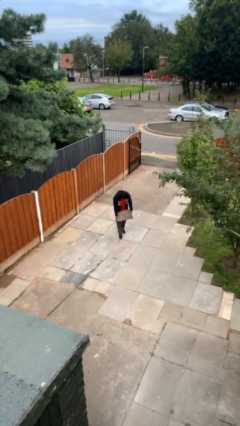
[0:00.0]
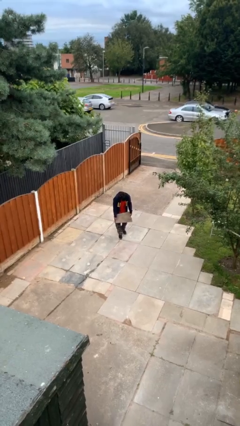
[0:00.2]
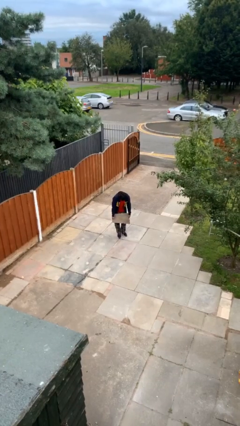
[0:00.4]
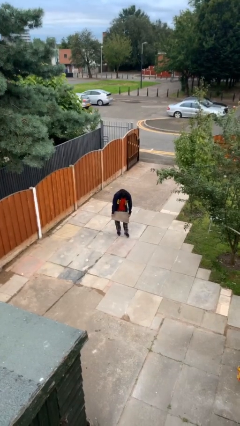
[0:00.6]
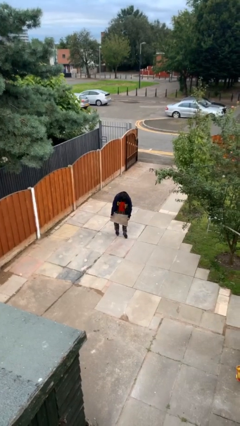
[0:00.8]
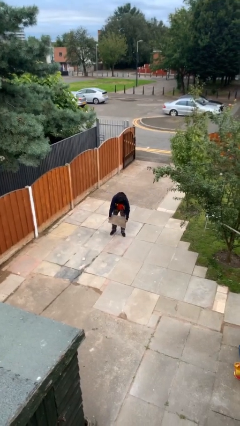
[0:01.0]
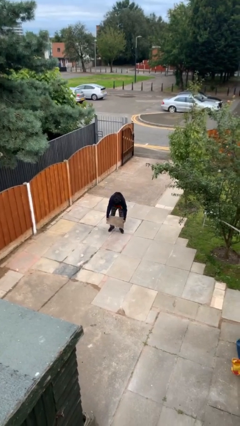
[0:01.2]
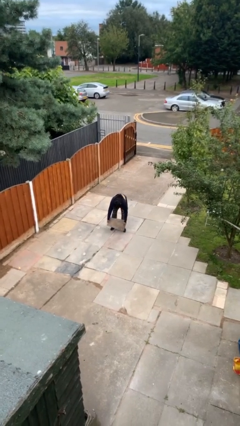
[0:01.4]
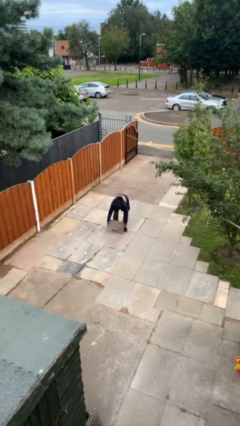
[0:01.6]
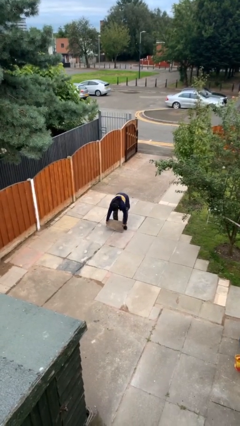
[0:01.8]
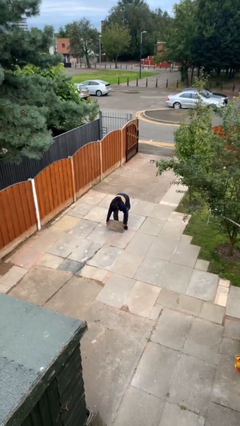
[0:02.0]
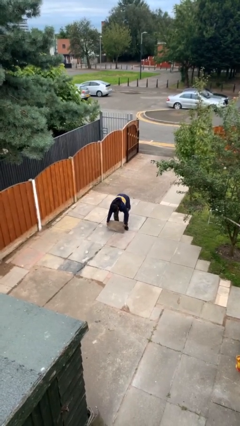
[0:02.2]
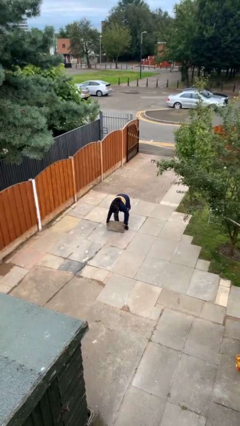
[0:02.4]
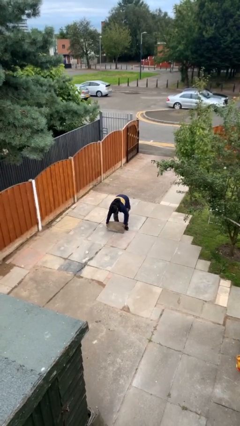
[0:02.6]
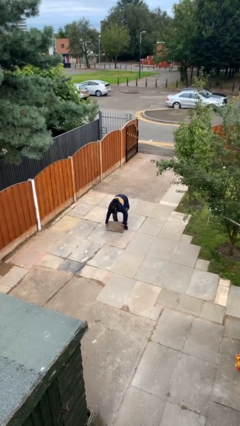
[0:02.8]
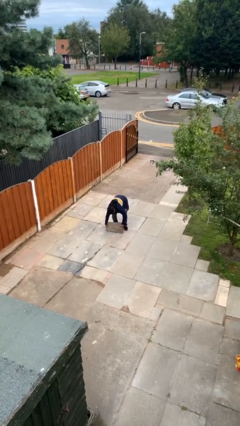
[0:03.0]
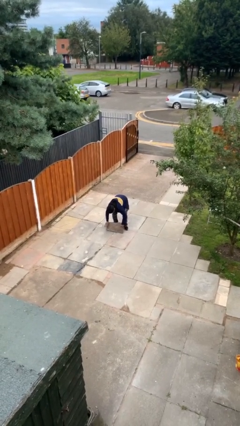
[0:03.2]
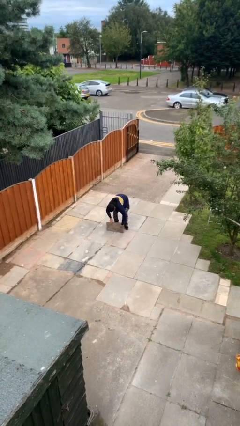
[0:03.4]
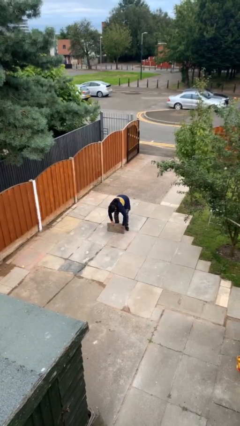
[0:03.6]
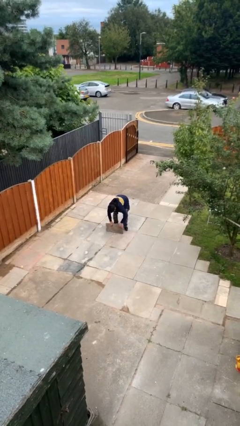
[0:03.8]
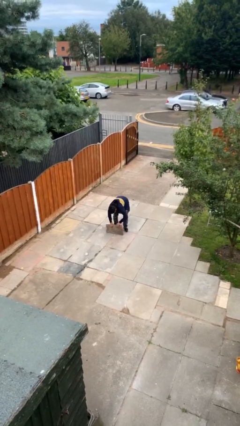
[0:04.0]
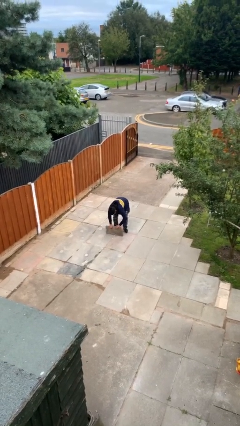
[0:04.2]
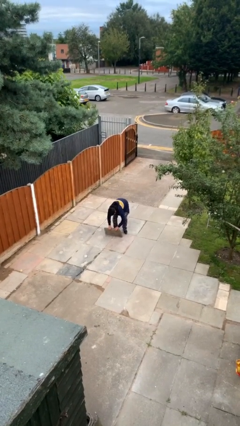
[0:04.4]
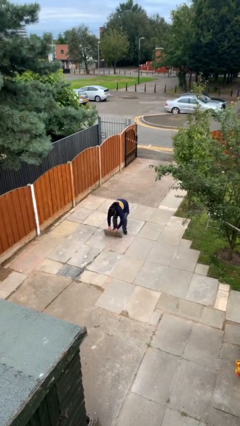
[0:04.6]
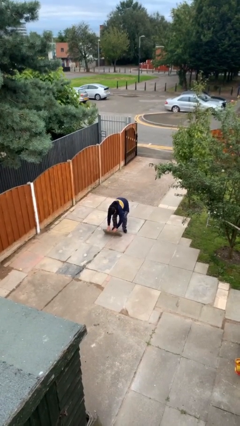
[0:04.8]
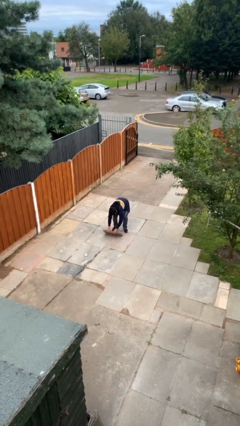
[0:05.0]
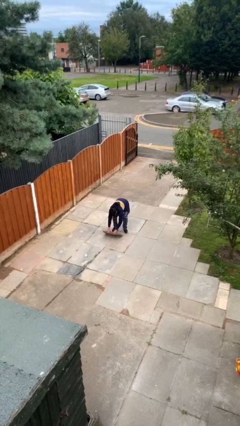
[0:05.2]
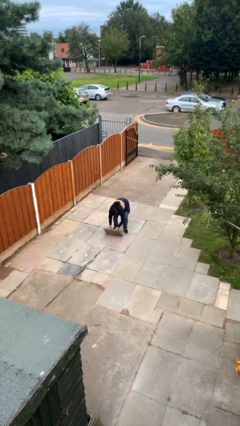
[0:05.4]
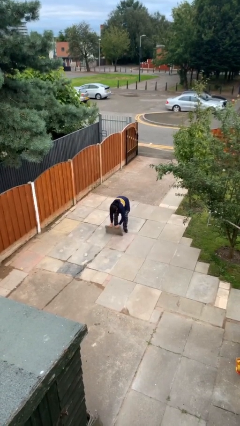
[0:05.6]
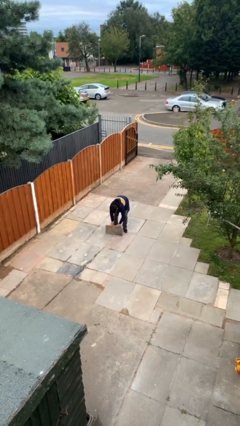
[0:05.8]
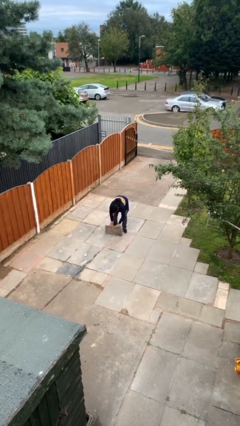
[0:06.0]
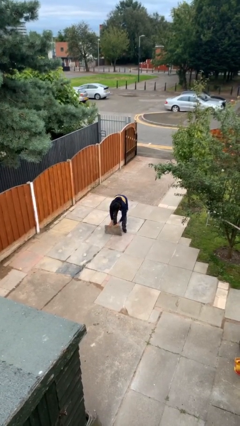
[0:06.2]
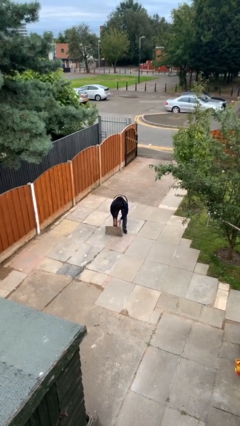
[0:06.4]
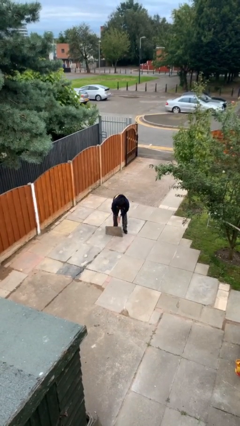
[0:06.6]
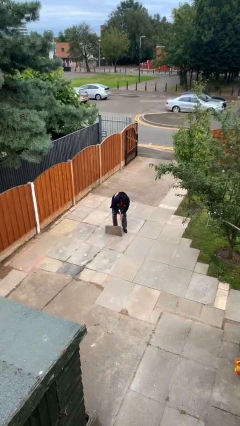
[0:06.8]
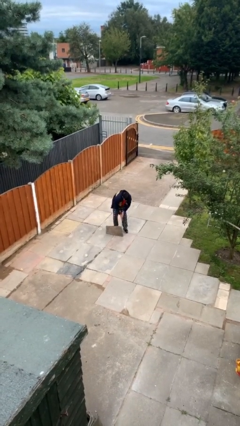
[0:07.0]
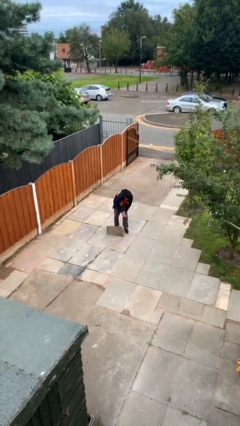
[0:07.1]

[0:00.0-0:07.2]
person puts down object on floor

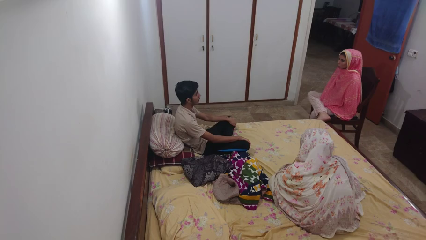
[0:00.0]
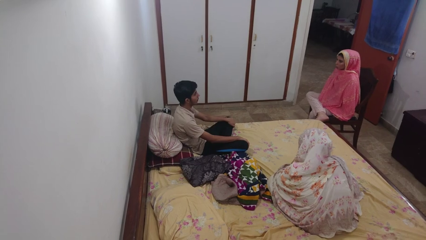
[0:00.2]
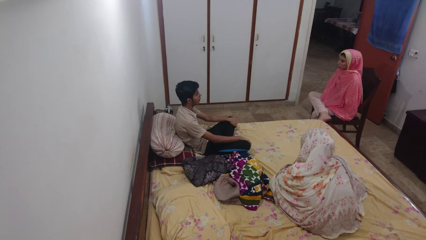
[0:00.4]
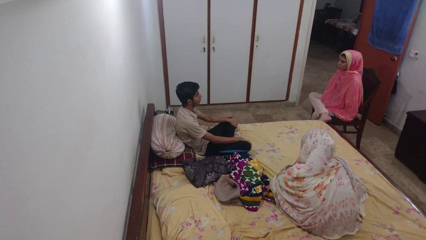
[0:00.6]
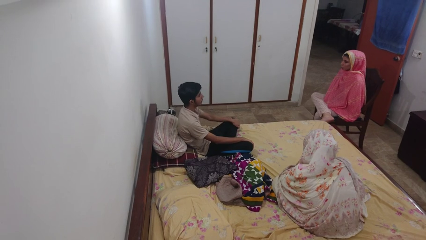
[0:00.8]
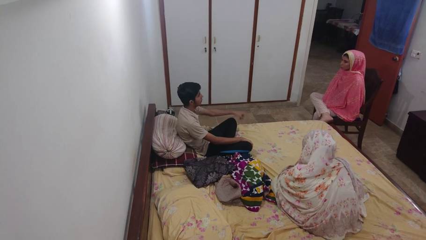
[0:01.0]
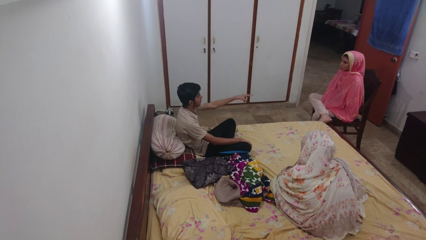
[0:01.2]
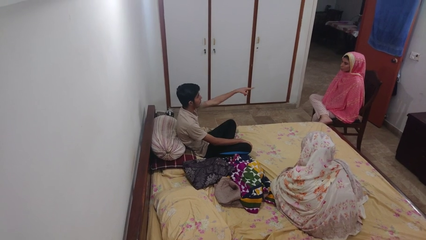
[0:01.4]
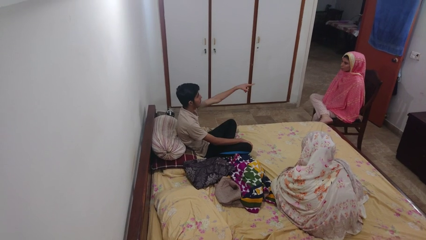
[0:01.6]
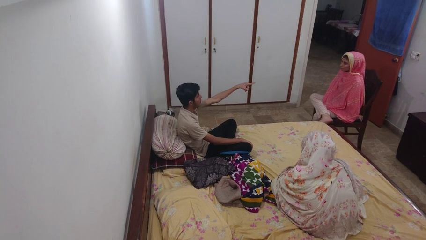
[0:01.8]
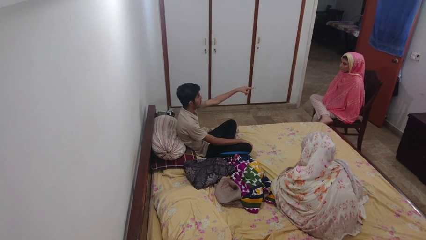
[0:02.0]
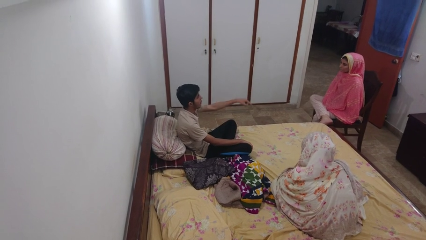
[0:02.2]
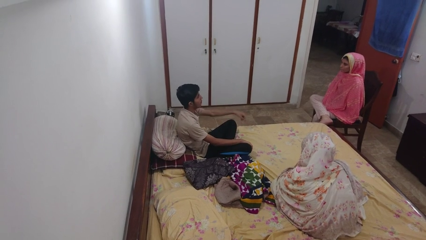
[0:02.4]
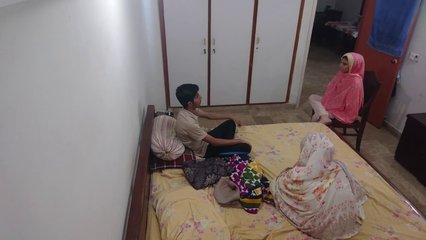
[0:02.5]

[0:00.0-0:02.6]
person points at person

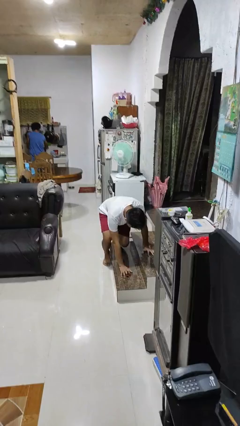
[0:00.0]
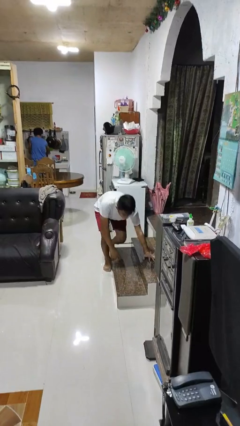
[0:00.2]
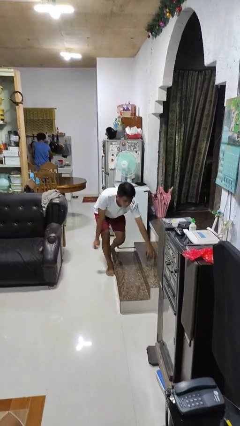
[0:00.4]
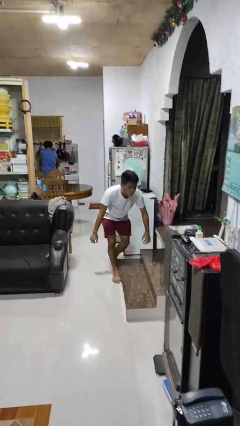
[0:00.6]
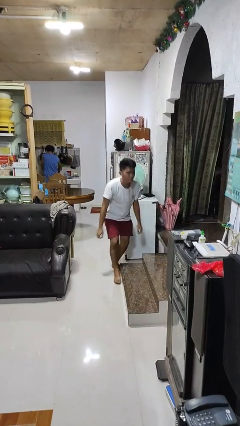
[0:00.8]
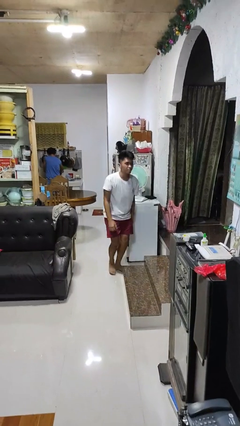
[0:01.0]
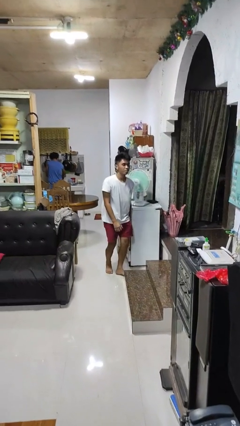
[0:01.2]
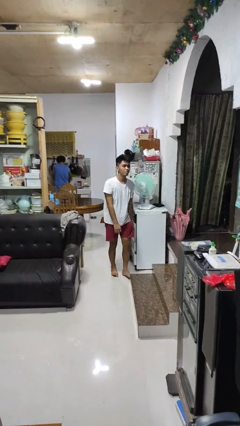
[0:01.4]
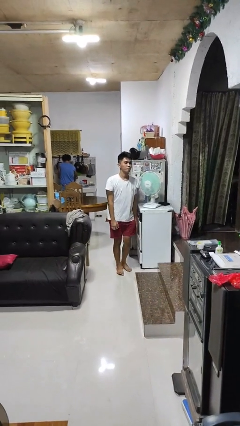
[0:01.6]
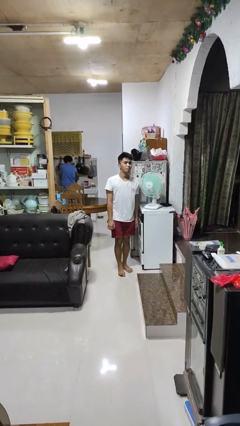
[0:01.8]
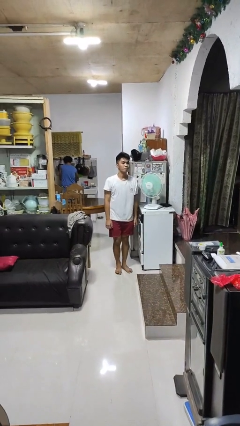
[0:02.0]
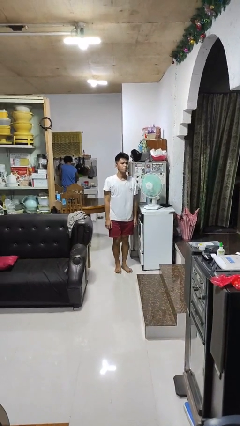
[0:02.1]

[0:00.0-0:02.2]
person stands up from floor

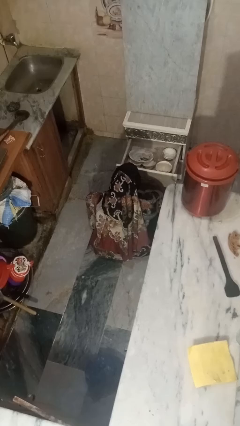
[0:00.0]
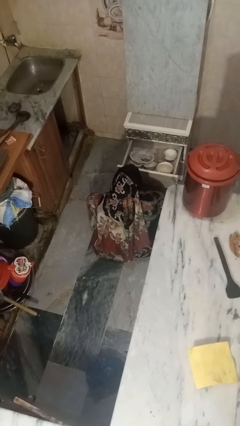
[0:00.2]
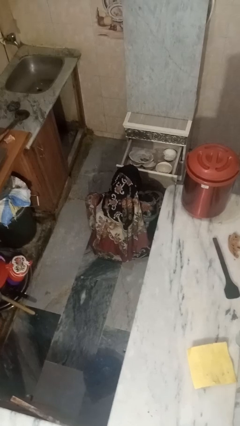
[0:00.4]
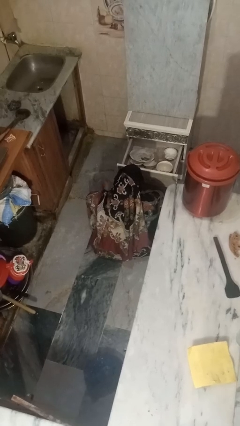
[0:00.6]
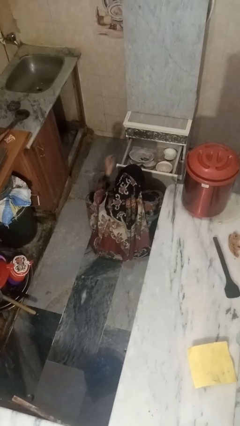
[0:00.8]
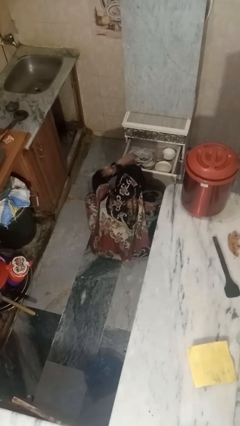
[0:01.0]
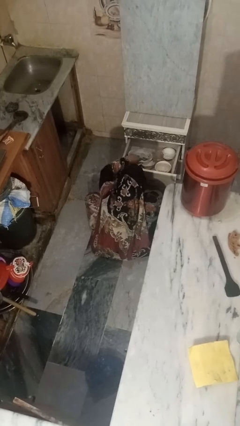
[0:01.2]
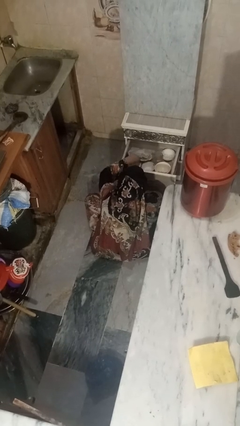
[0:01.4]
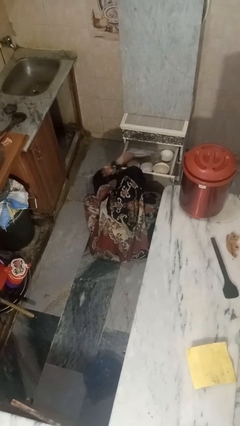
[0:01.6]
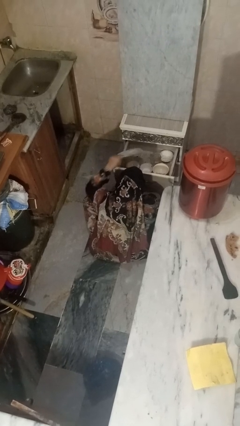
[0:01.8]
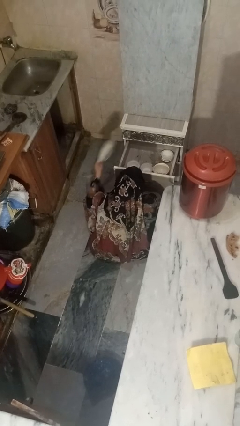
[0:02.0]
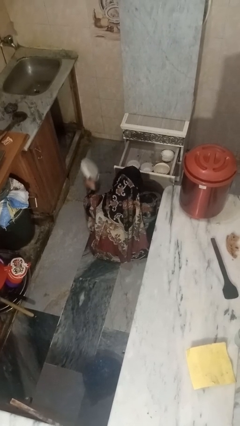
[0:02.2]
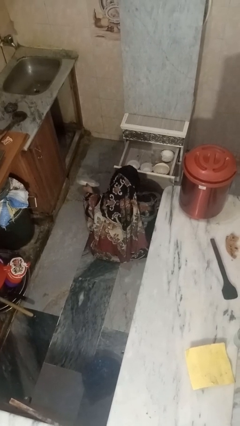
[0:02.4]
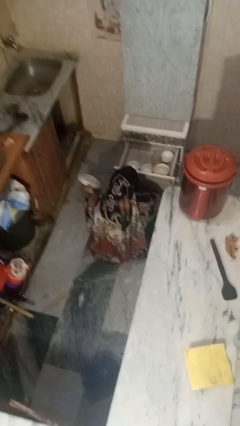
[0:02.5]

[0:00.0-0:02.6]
person takes object from kitchen drawer

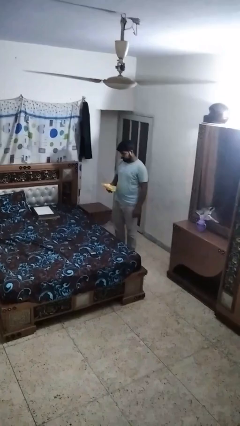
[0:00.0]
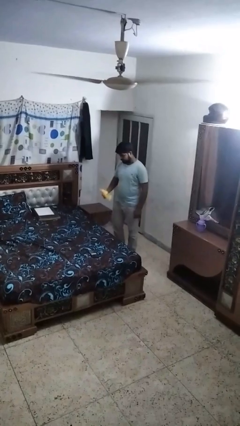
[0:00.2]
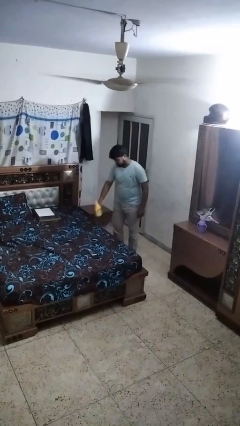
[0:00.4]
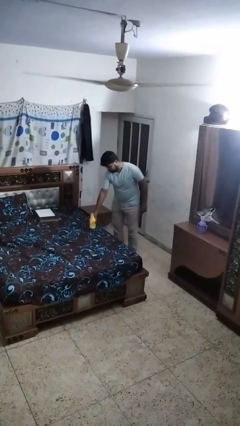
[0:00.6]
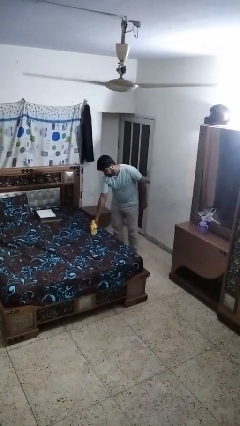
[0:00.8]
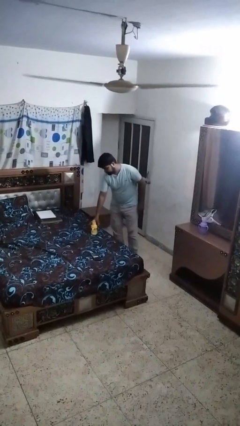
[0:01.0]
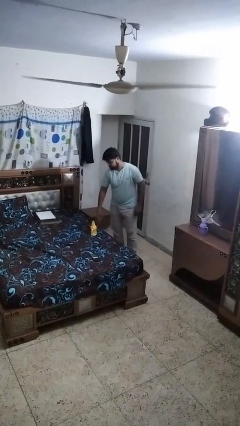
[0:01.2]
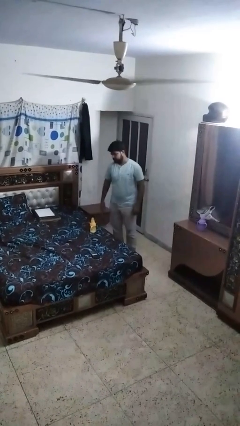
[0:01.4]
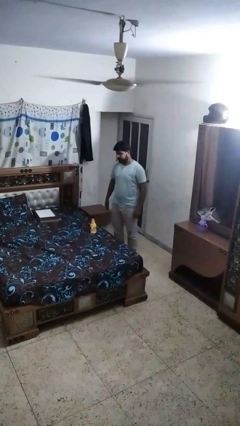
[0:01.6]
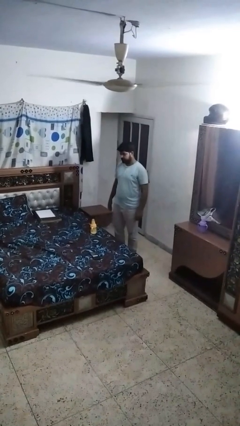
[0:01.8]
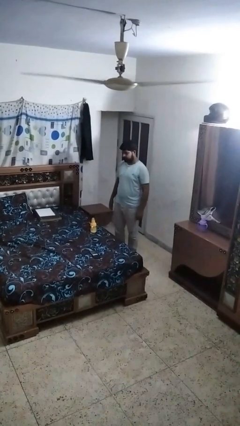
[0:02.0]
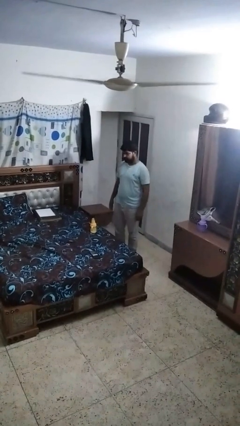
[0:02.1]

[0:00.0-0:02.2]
person puts down object on bed

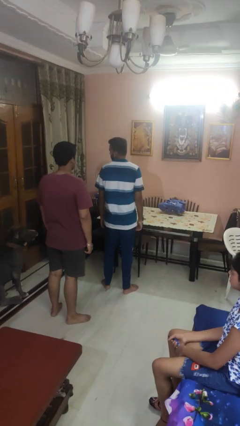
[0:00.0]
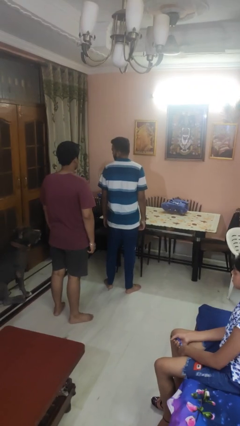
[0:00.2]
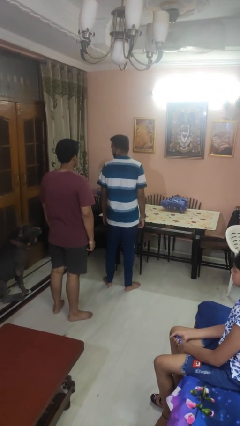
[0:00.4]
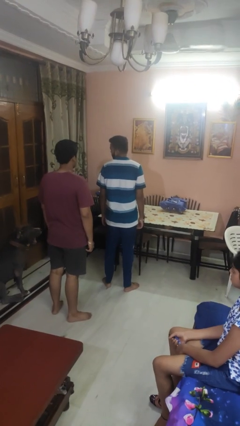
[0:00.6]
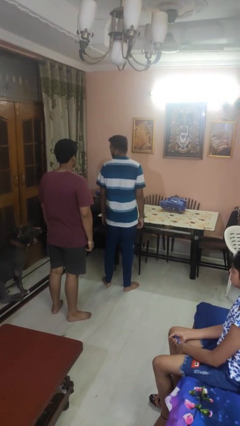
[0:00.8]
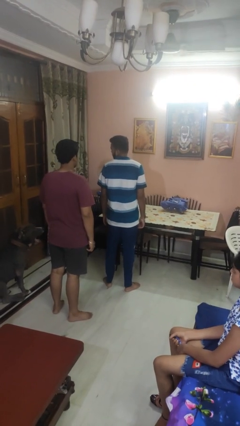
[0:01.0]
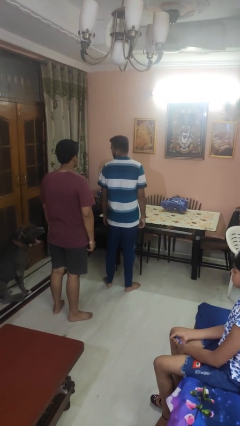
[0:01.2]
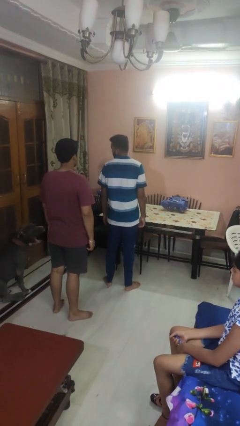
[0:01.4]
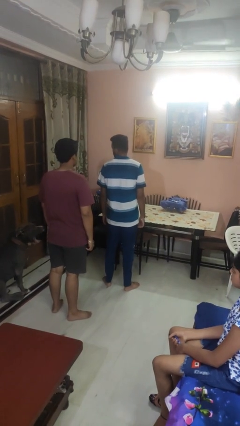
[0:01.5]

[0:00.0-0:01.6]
person looks over shoulder
